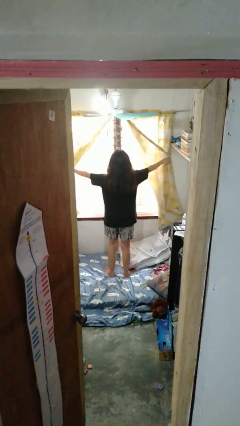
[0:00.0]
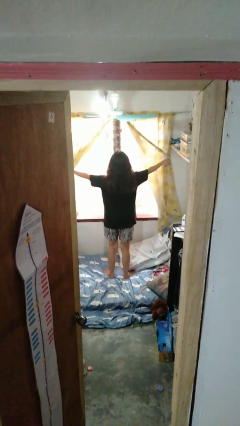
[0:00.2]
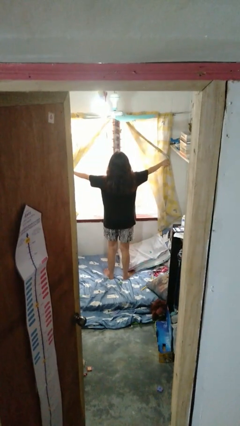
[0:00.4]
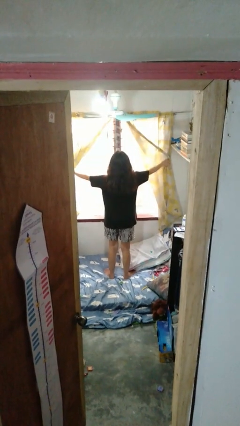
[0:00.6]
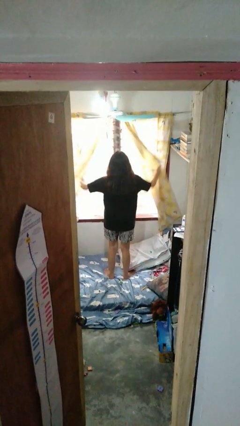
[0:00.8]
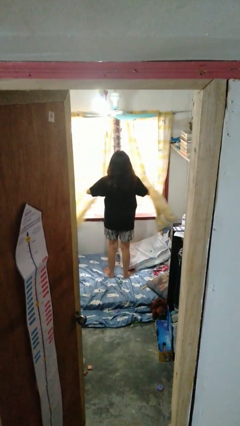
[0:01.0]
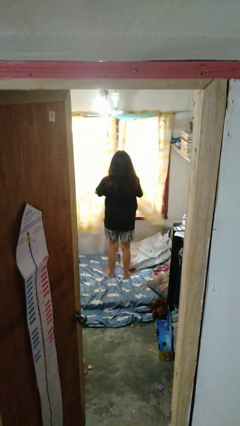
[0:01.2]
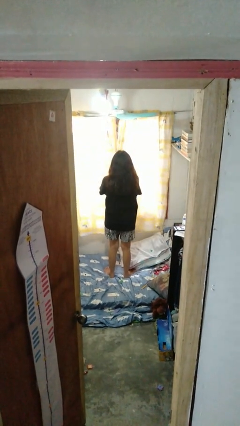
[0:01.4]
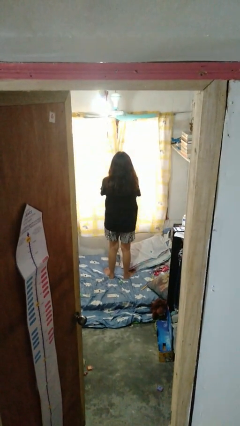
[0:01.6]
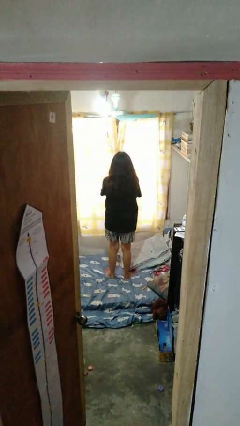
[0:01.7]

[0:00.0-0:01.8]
person closes curtains

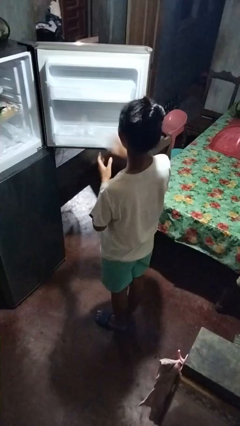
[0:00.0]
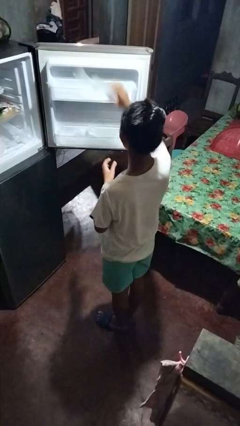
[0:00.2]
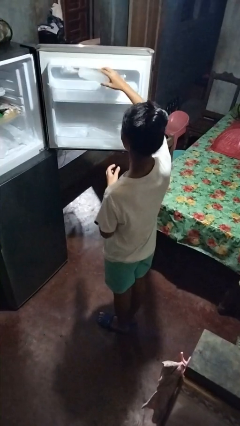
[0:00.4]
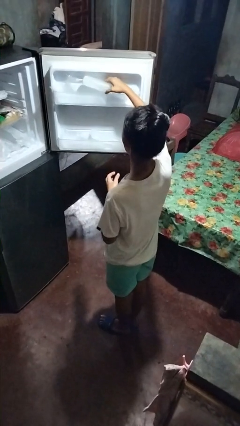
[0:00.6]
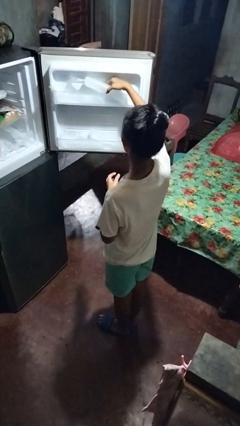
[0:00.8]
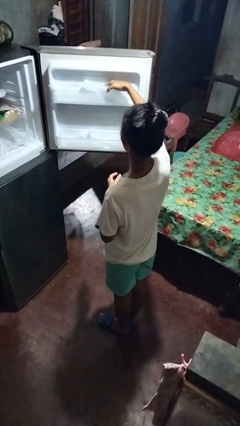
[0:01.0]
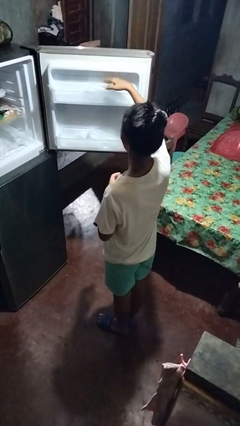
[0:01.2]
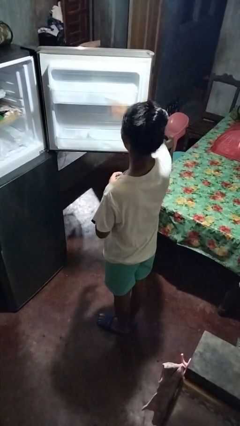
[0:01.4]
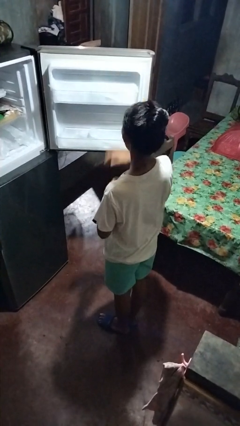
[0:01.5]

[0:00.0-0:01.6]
person puts object into refrigerator

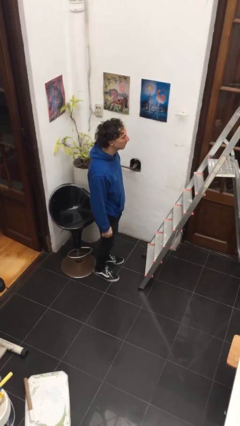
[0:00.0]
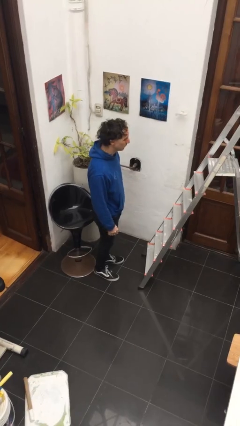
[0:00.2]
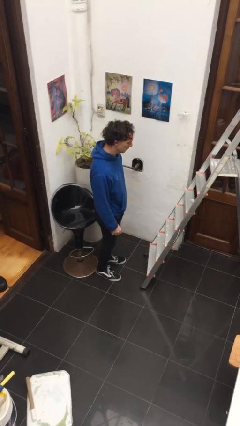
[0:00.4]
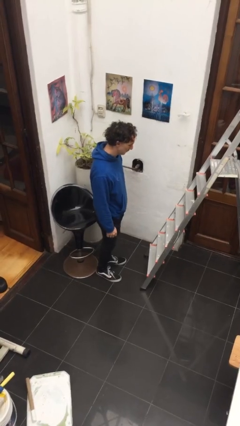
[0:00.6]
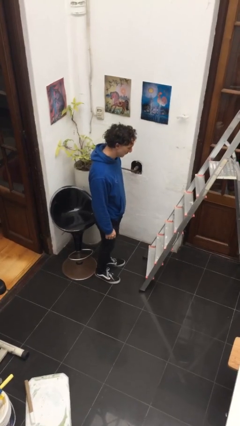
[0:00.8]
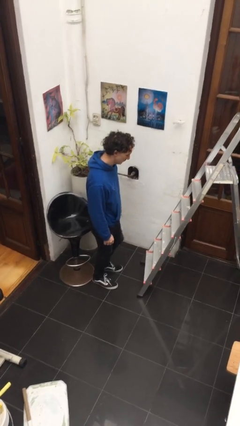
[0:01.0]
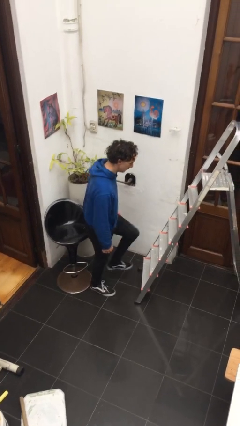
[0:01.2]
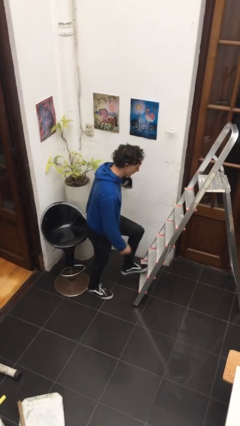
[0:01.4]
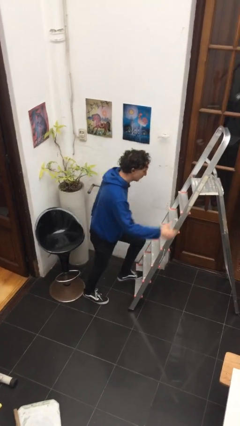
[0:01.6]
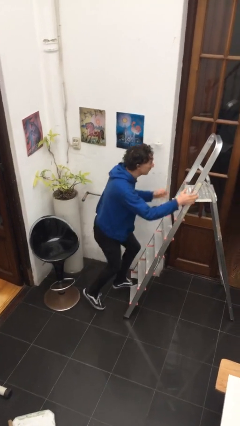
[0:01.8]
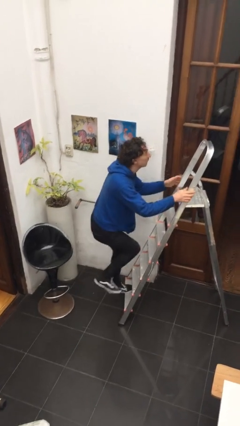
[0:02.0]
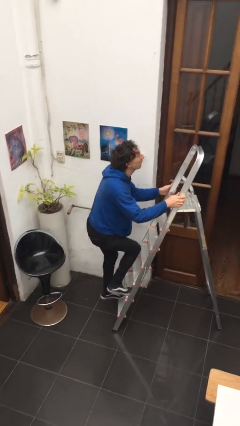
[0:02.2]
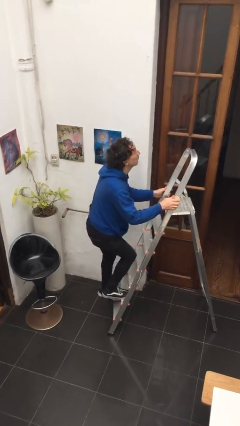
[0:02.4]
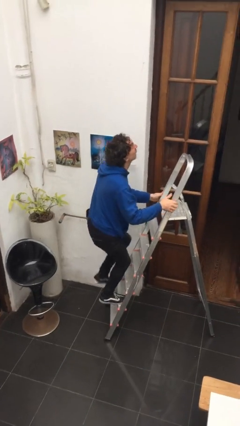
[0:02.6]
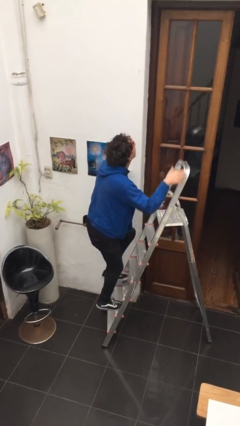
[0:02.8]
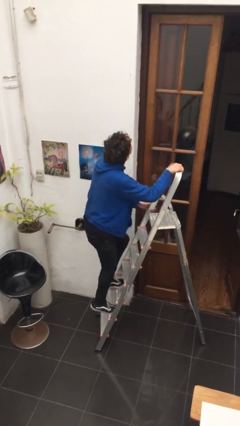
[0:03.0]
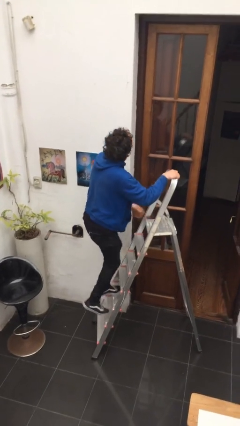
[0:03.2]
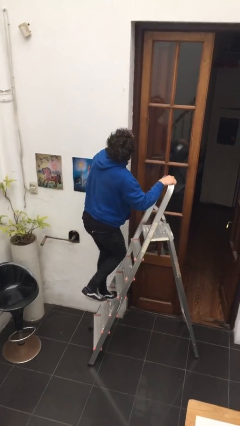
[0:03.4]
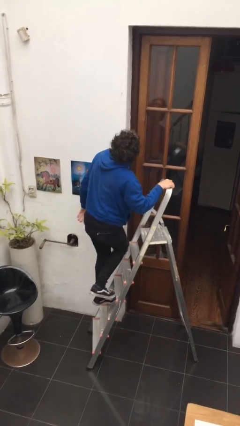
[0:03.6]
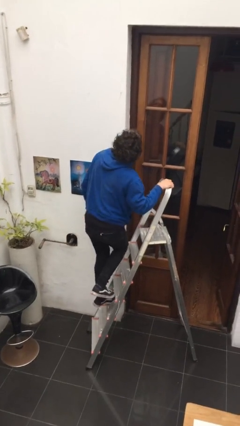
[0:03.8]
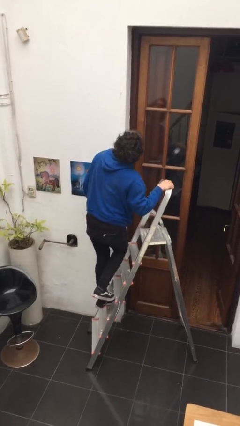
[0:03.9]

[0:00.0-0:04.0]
person climbs up ladder

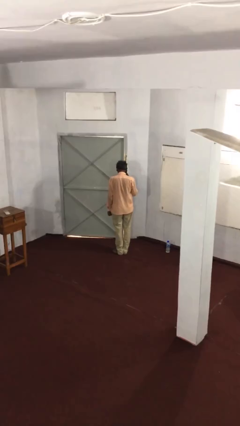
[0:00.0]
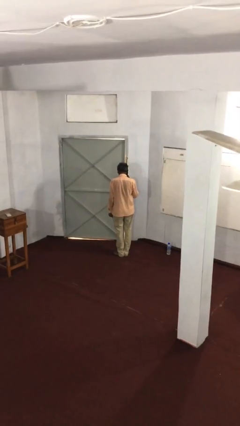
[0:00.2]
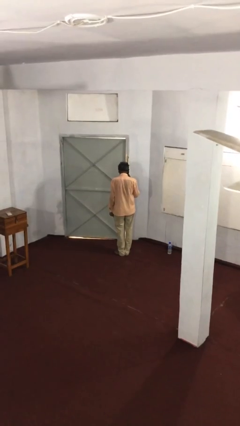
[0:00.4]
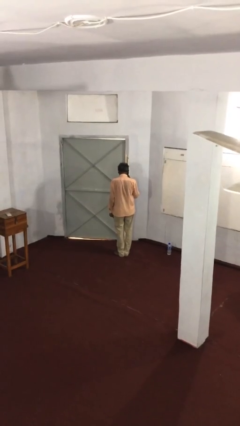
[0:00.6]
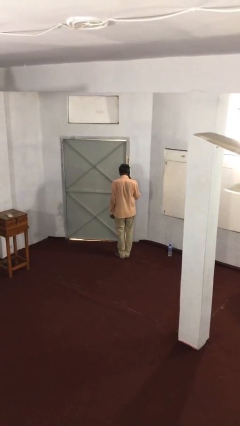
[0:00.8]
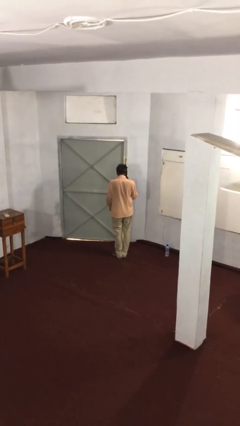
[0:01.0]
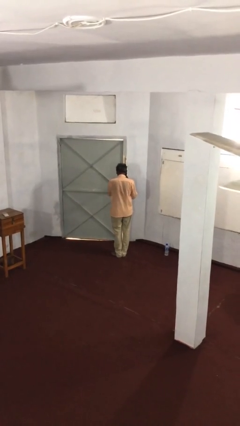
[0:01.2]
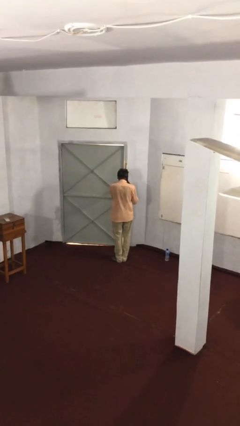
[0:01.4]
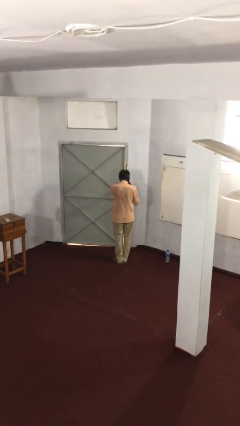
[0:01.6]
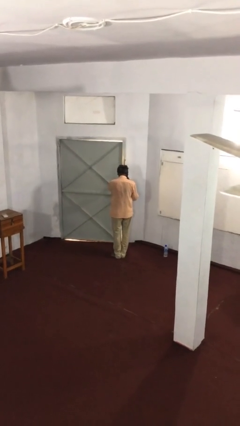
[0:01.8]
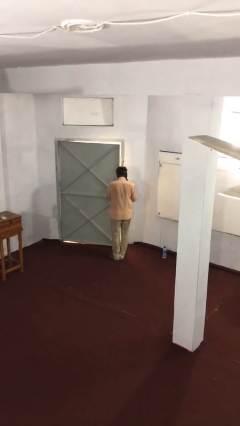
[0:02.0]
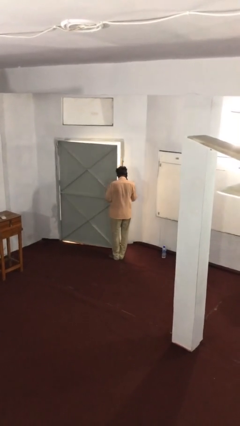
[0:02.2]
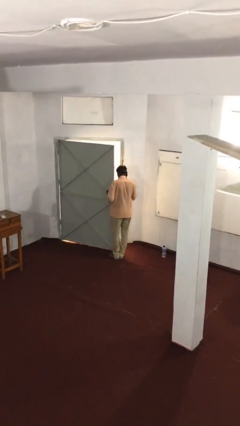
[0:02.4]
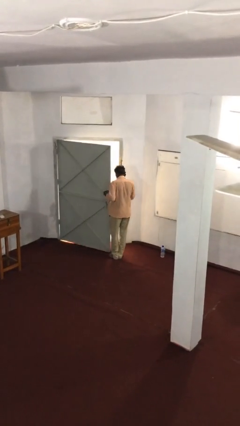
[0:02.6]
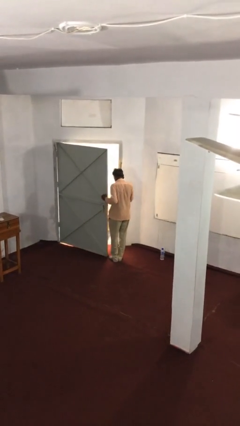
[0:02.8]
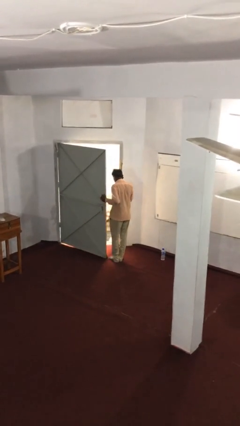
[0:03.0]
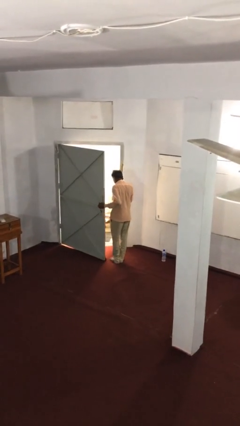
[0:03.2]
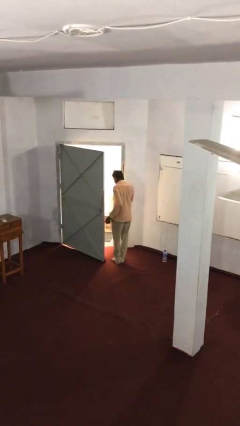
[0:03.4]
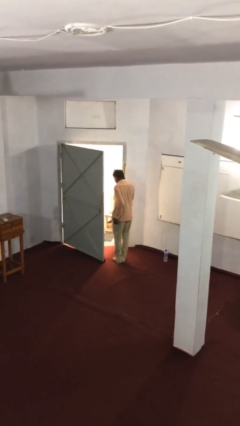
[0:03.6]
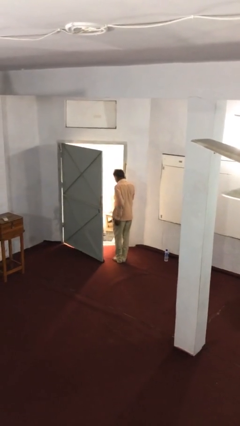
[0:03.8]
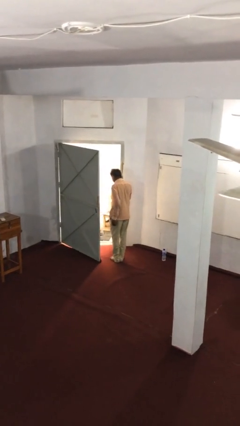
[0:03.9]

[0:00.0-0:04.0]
person opens facility door

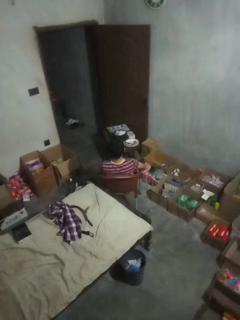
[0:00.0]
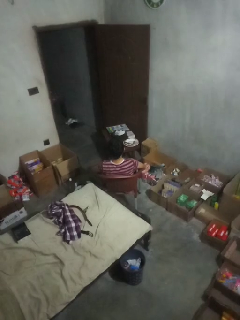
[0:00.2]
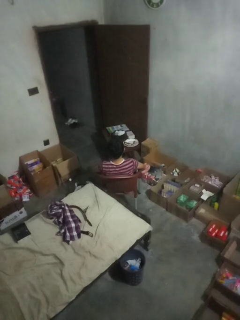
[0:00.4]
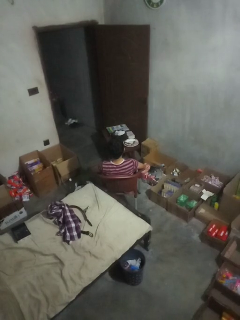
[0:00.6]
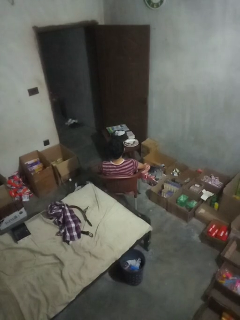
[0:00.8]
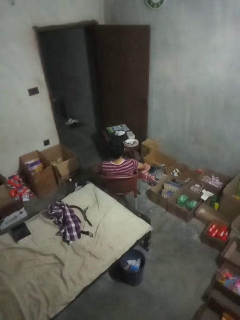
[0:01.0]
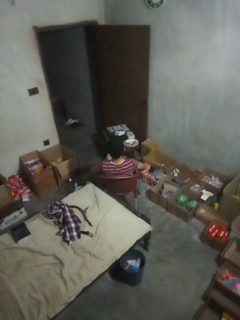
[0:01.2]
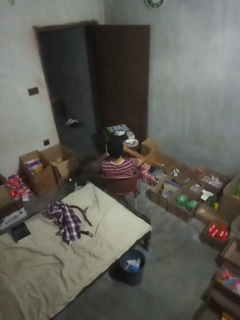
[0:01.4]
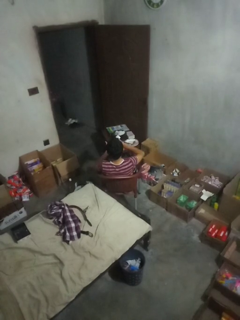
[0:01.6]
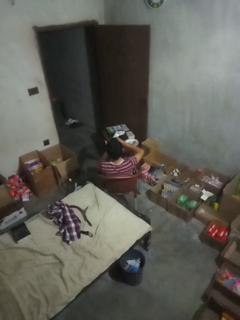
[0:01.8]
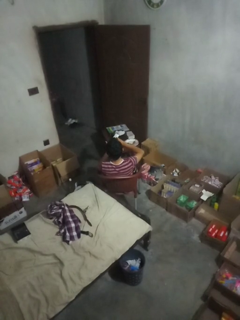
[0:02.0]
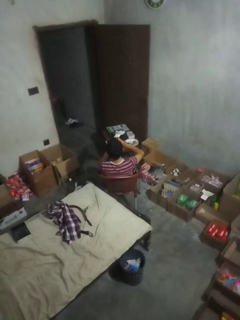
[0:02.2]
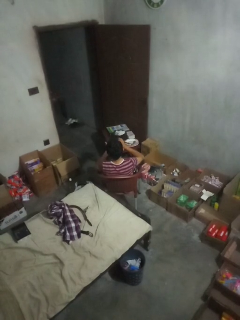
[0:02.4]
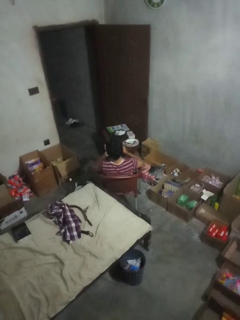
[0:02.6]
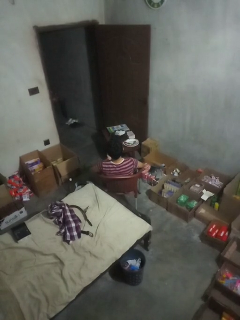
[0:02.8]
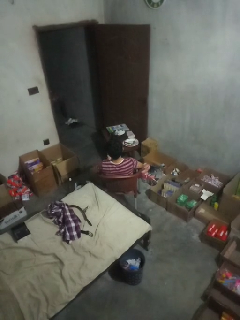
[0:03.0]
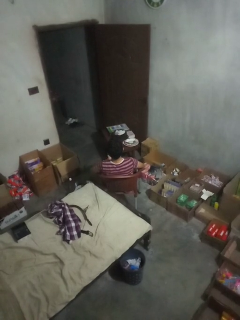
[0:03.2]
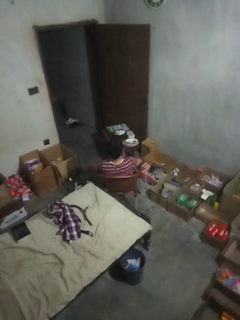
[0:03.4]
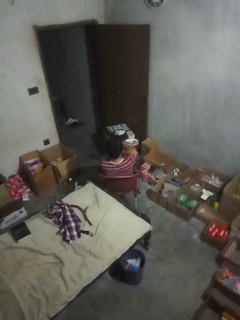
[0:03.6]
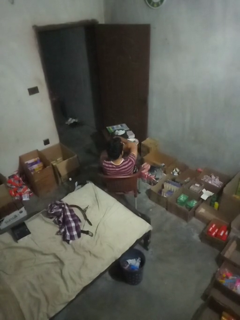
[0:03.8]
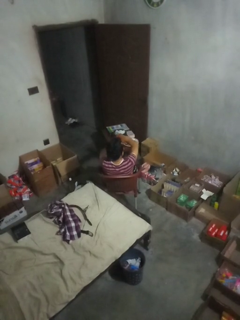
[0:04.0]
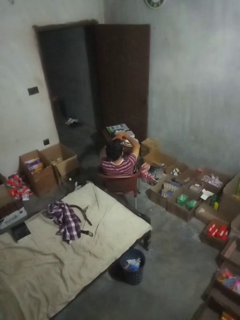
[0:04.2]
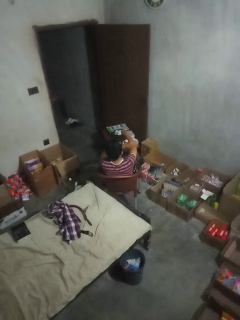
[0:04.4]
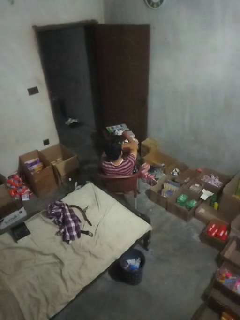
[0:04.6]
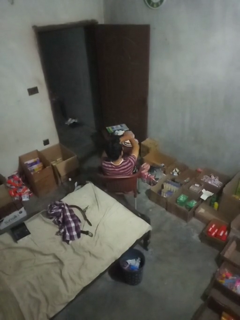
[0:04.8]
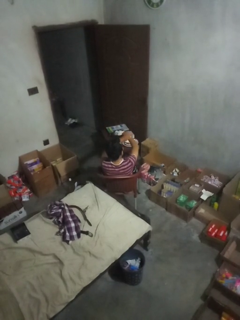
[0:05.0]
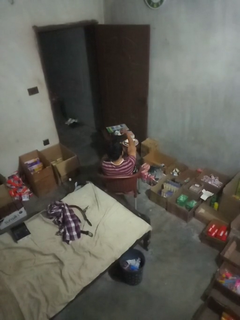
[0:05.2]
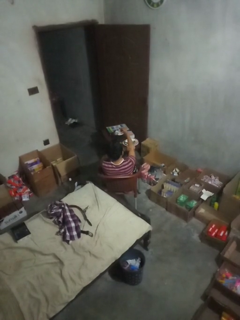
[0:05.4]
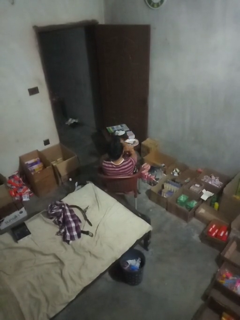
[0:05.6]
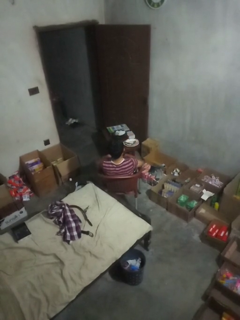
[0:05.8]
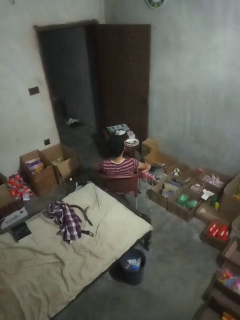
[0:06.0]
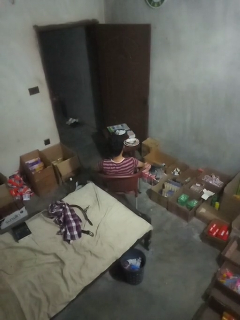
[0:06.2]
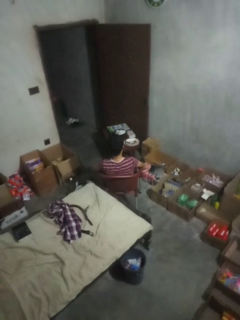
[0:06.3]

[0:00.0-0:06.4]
person applies sunscreen

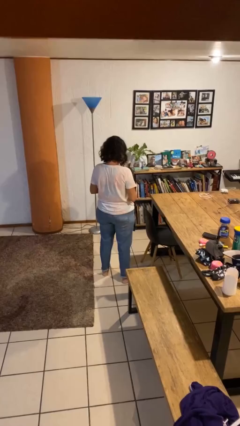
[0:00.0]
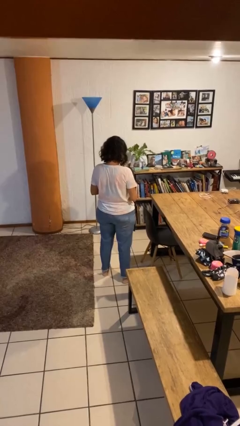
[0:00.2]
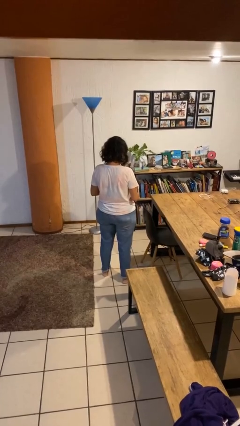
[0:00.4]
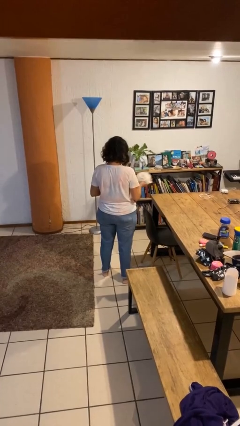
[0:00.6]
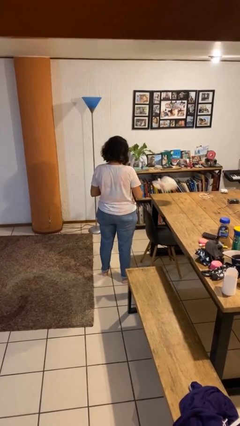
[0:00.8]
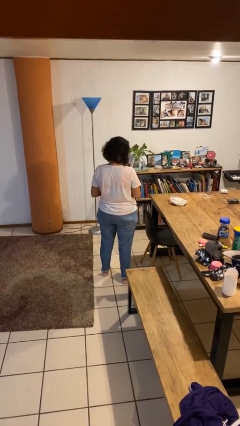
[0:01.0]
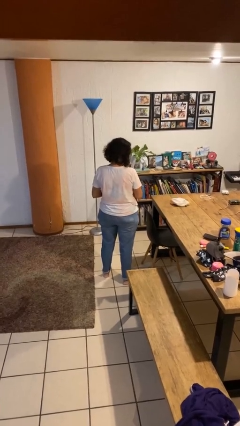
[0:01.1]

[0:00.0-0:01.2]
person throws object on table
